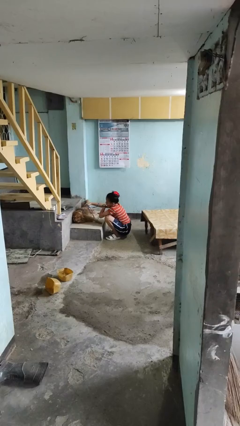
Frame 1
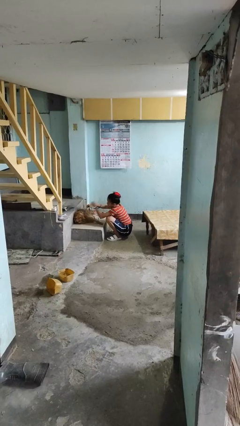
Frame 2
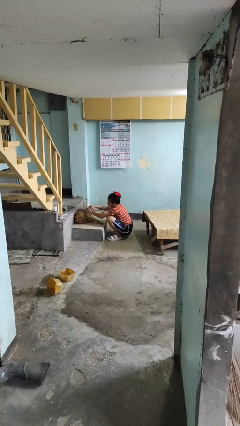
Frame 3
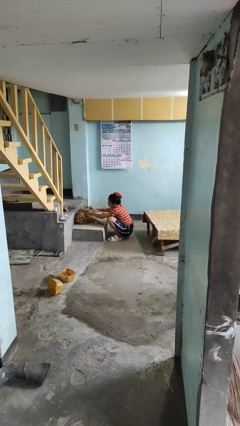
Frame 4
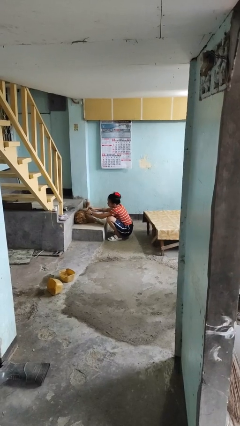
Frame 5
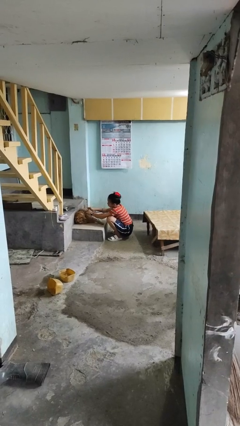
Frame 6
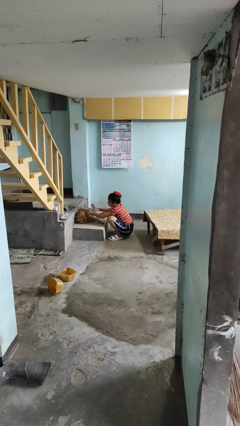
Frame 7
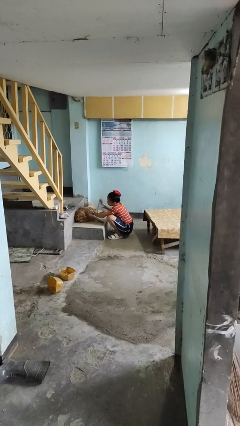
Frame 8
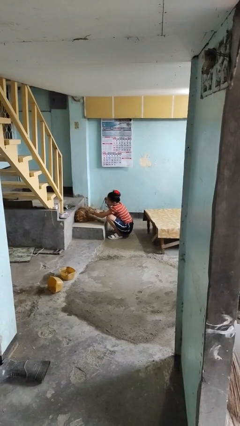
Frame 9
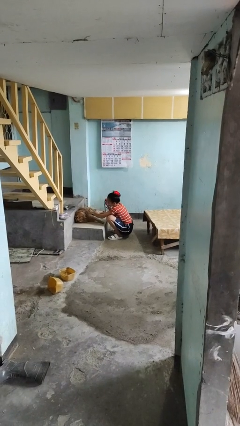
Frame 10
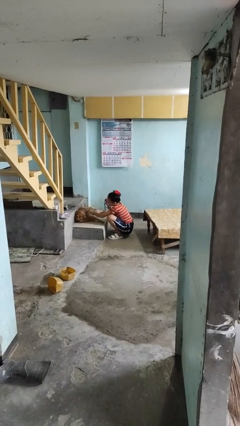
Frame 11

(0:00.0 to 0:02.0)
person unattaches leash from dog

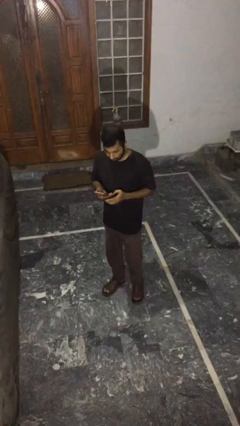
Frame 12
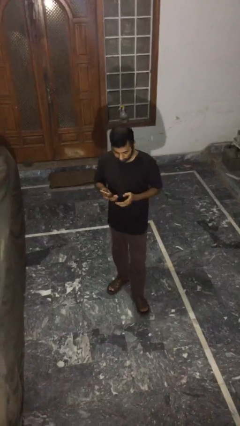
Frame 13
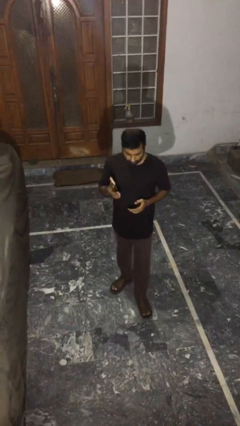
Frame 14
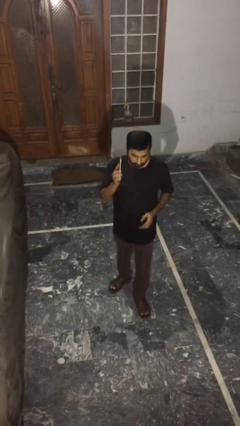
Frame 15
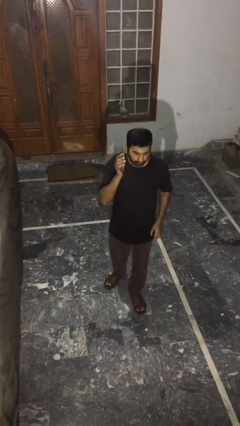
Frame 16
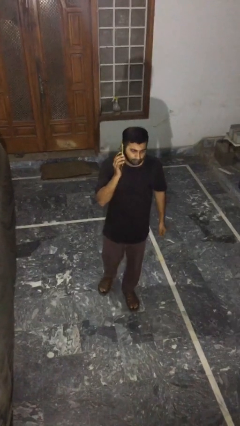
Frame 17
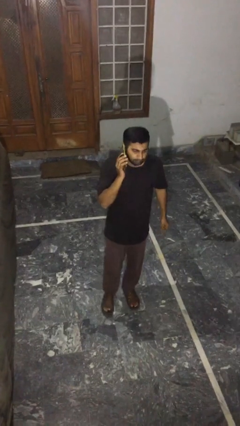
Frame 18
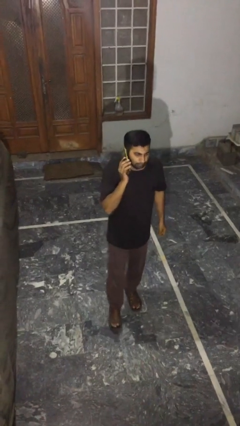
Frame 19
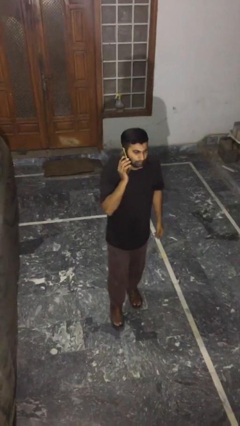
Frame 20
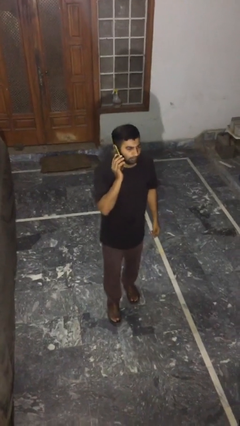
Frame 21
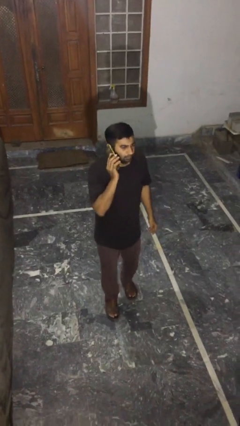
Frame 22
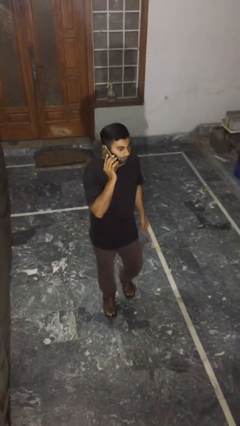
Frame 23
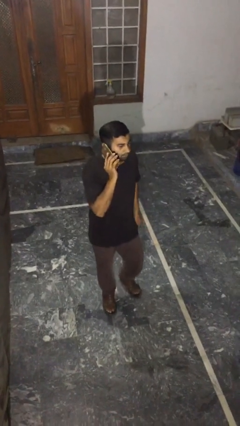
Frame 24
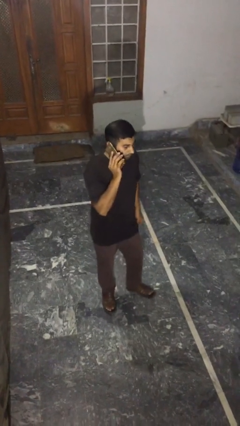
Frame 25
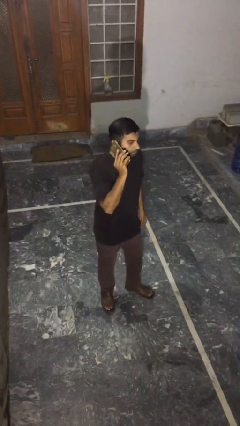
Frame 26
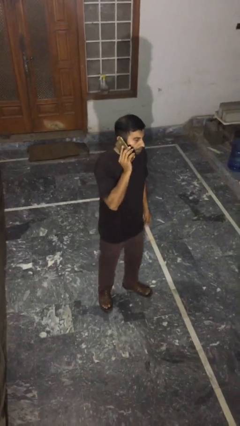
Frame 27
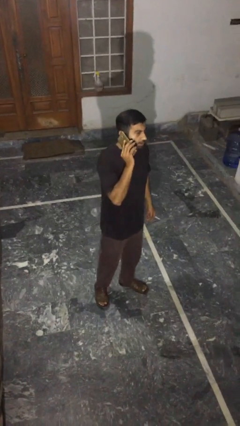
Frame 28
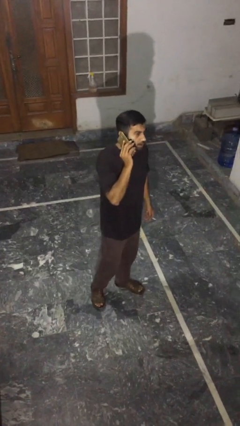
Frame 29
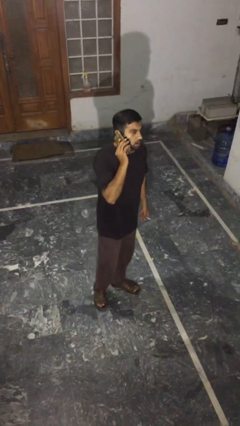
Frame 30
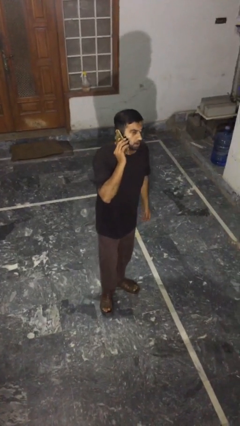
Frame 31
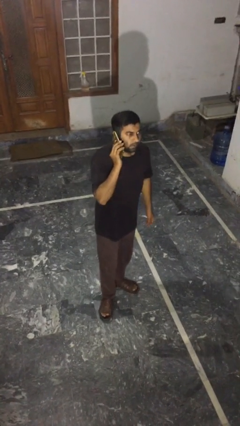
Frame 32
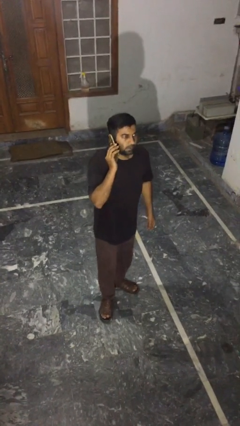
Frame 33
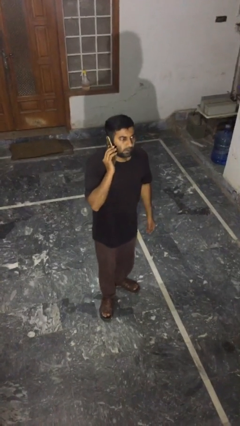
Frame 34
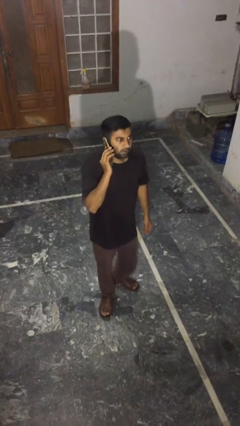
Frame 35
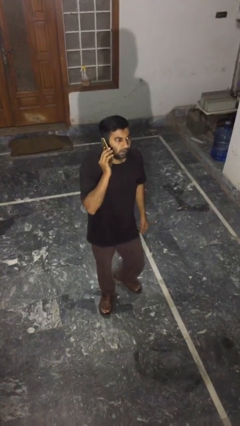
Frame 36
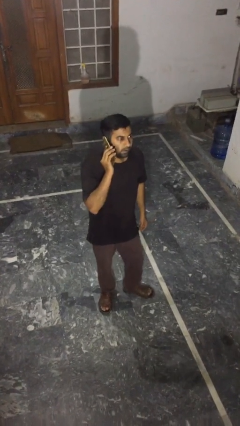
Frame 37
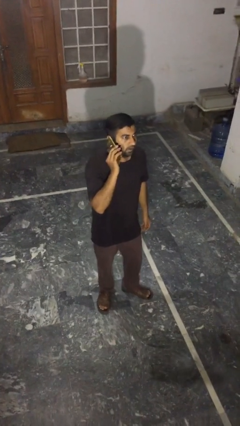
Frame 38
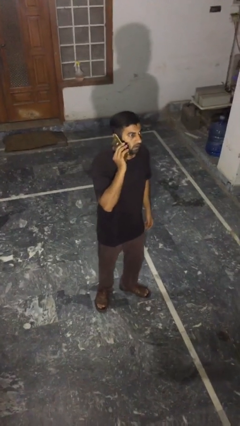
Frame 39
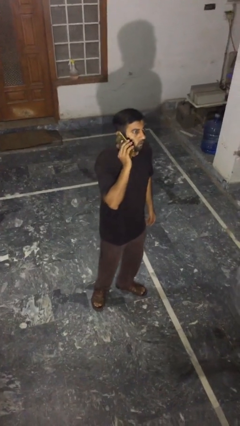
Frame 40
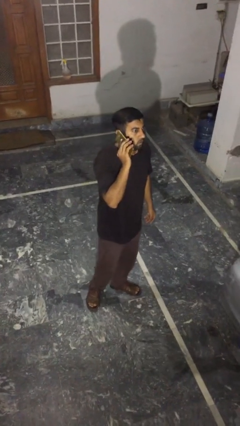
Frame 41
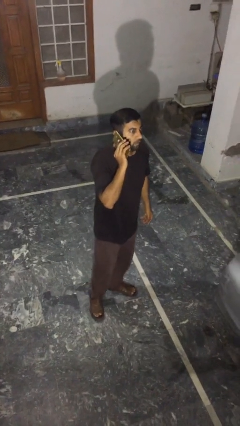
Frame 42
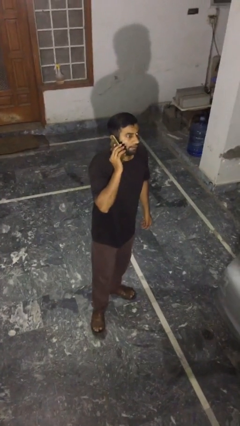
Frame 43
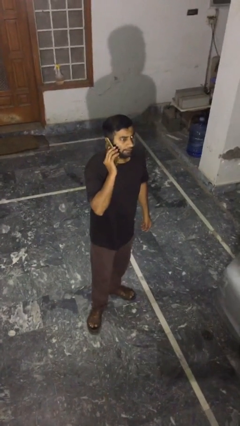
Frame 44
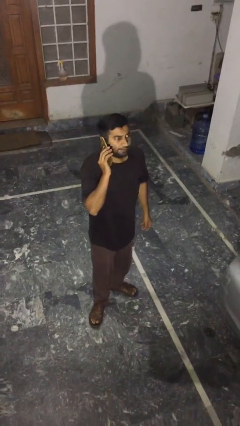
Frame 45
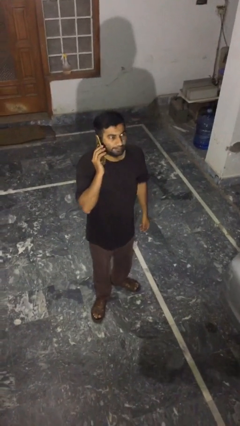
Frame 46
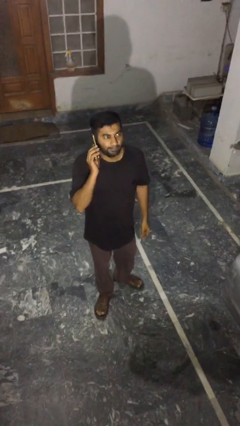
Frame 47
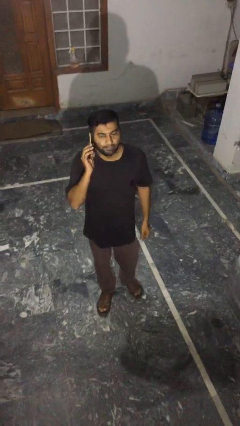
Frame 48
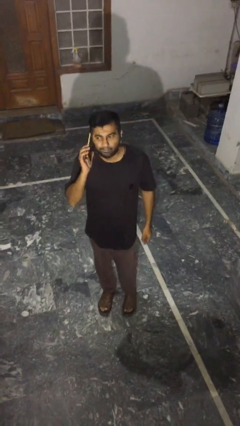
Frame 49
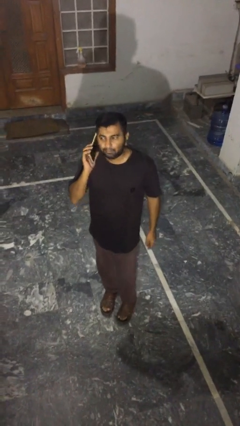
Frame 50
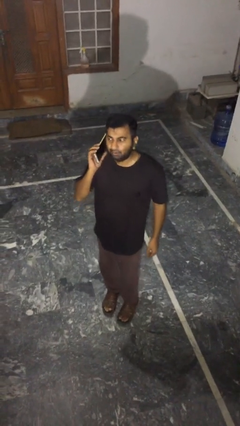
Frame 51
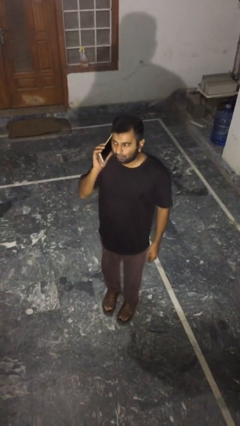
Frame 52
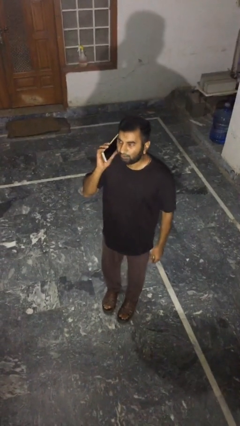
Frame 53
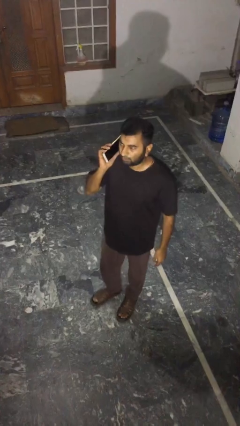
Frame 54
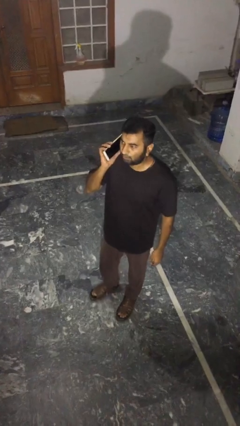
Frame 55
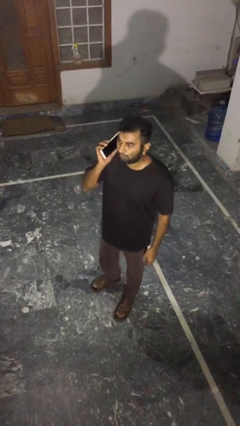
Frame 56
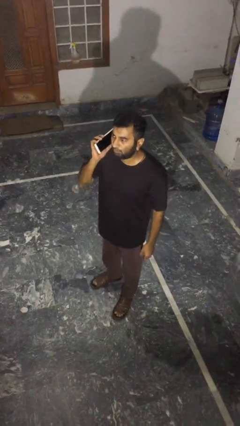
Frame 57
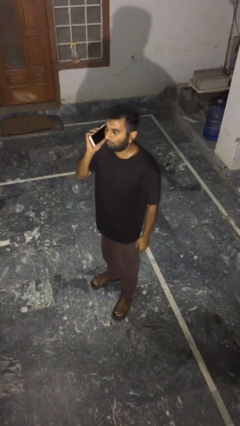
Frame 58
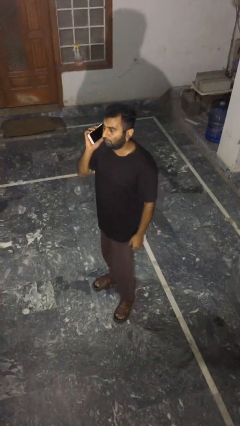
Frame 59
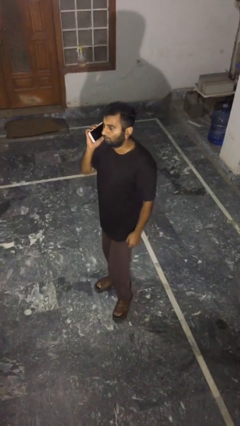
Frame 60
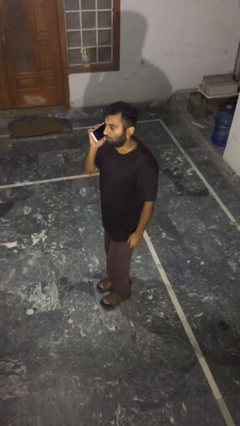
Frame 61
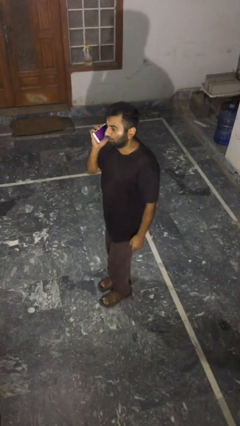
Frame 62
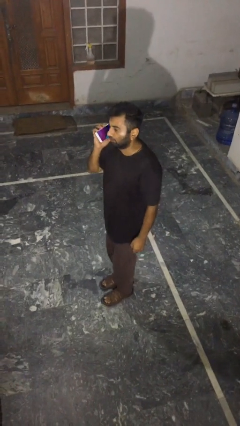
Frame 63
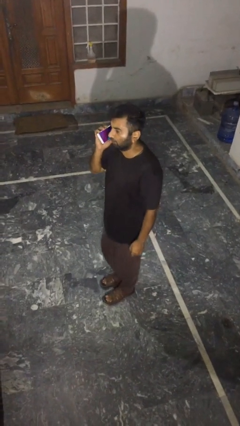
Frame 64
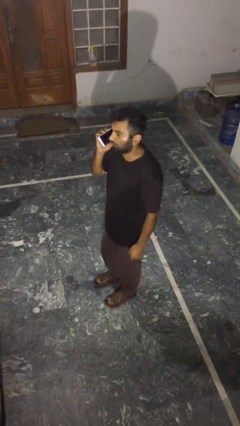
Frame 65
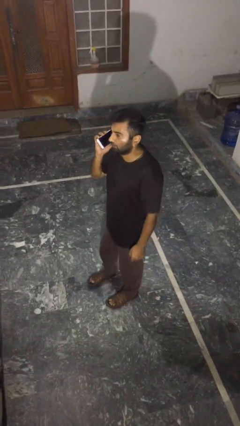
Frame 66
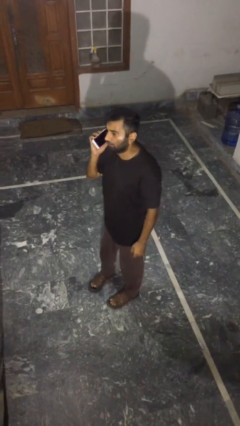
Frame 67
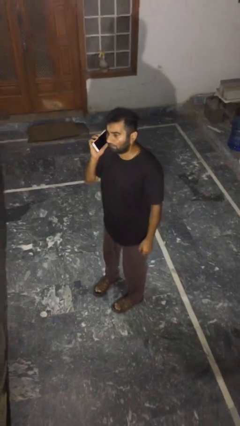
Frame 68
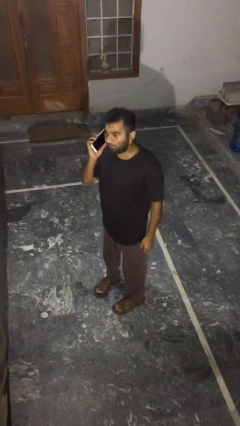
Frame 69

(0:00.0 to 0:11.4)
person talks on phone

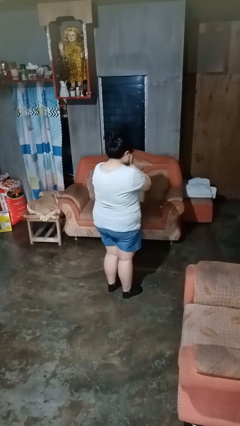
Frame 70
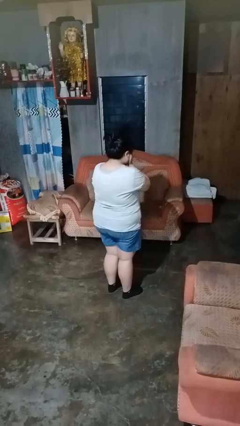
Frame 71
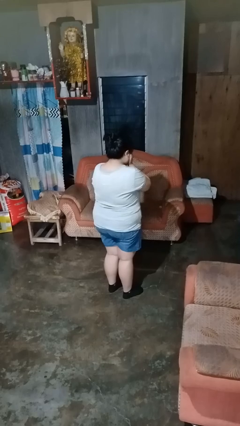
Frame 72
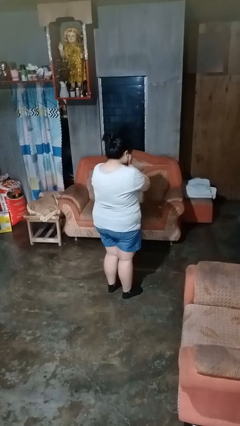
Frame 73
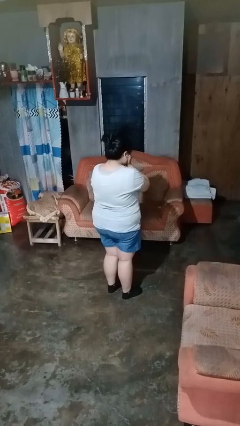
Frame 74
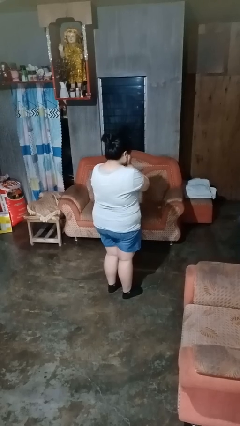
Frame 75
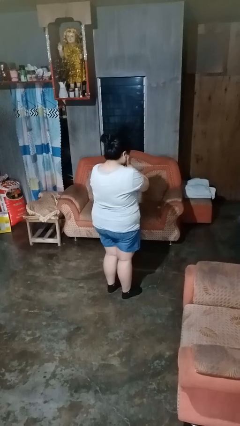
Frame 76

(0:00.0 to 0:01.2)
person covers face with hands

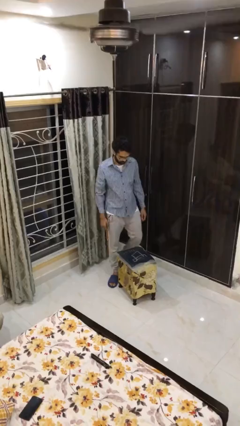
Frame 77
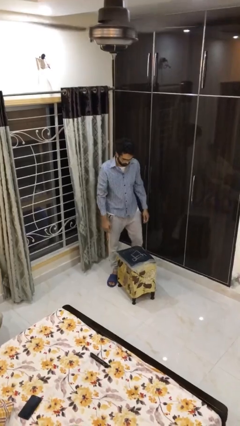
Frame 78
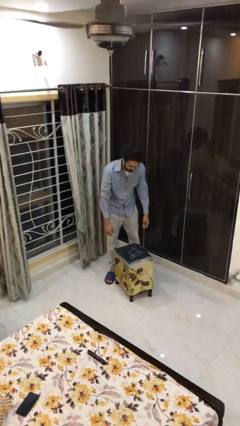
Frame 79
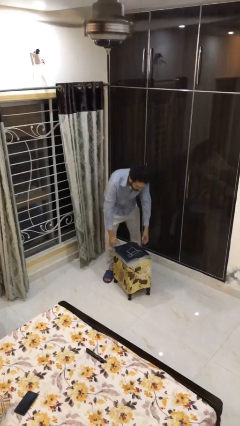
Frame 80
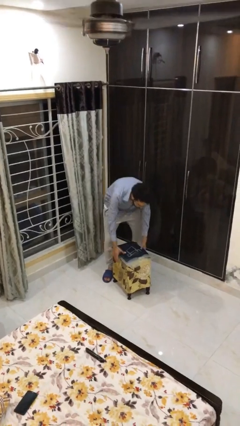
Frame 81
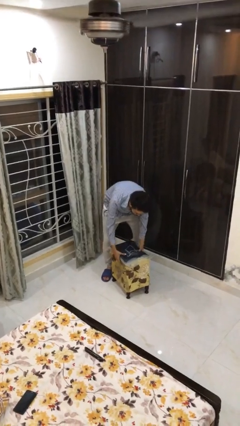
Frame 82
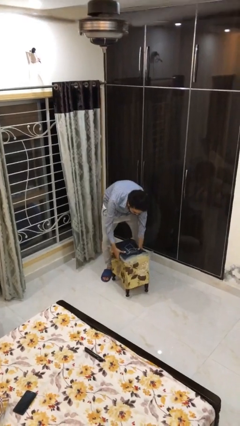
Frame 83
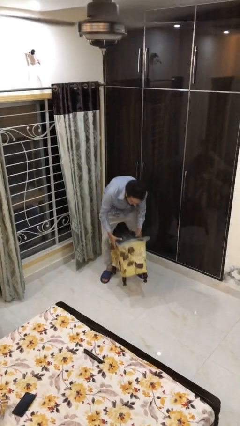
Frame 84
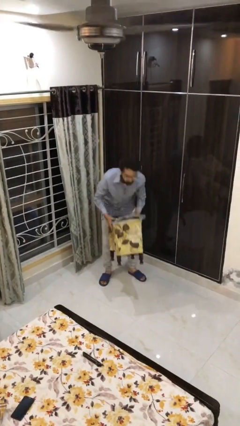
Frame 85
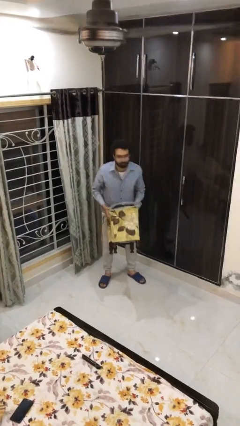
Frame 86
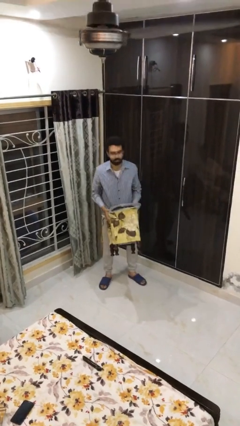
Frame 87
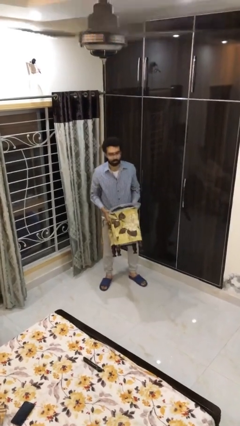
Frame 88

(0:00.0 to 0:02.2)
person picks up object from floor

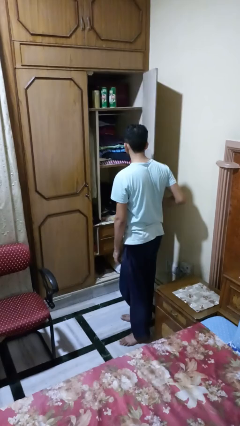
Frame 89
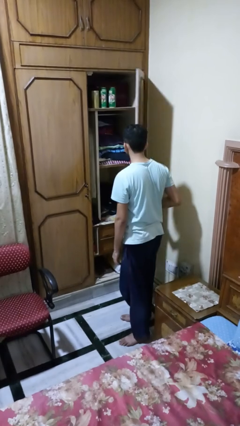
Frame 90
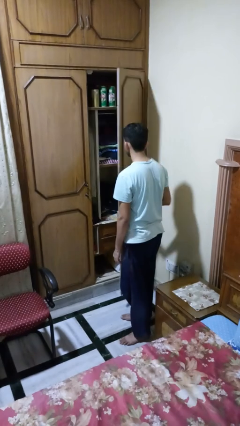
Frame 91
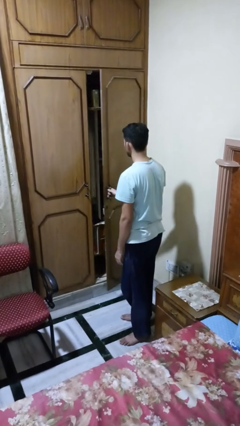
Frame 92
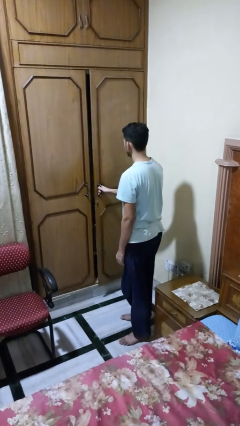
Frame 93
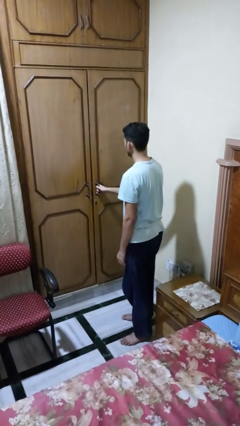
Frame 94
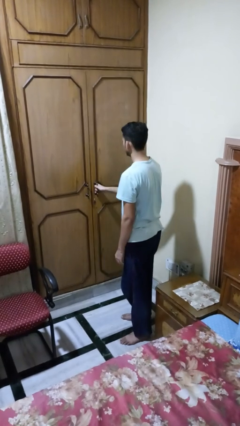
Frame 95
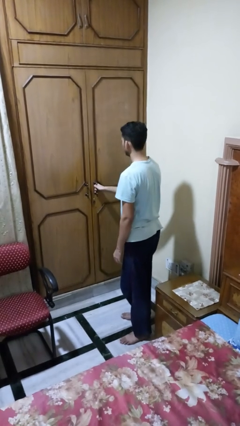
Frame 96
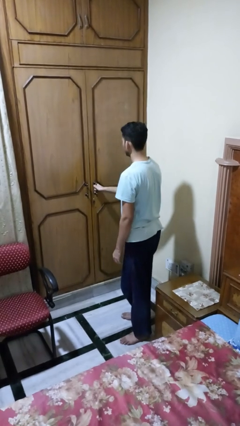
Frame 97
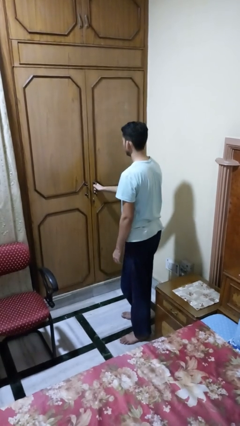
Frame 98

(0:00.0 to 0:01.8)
person closes closet door
